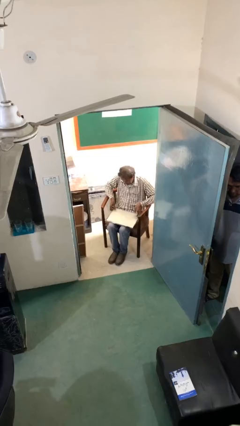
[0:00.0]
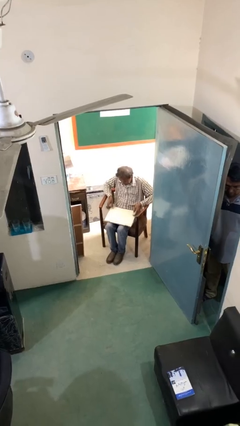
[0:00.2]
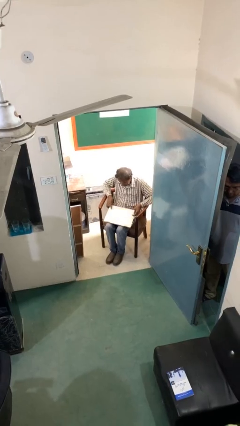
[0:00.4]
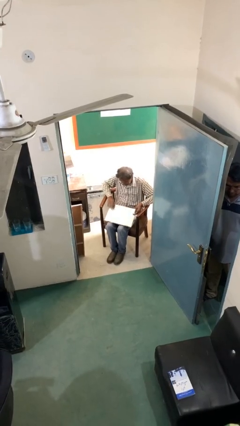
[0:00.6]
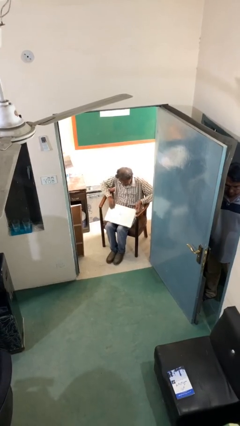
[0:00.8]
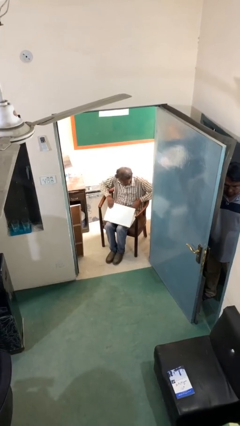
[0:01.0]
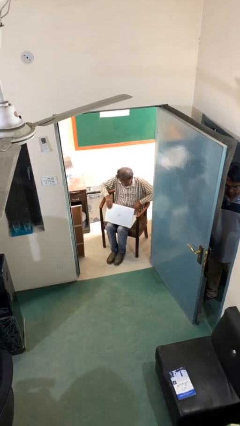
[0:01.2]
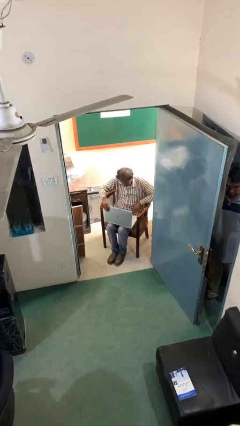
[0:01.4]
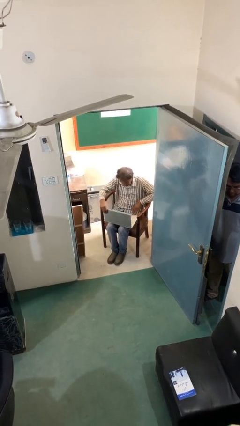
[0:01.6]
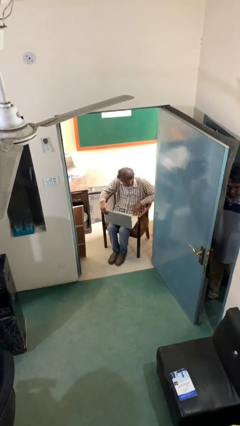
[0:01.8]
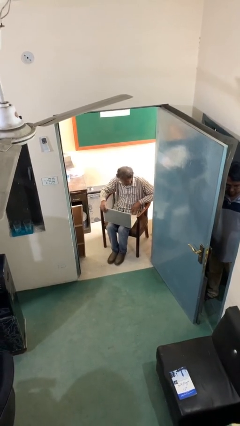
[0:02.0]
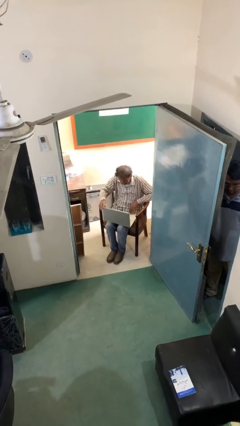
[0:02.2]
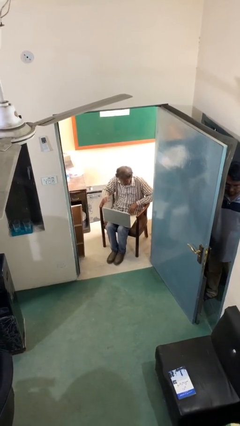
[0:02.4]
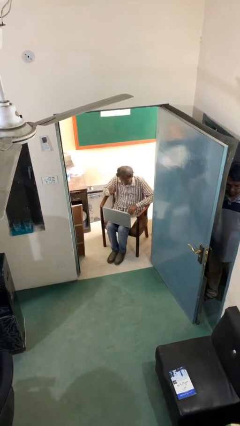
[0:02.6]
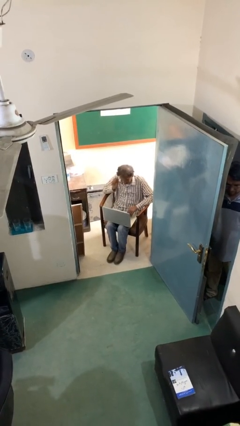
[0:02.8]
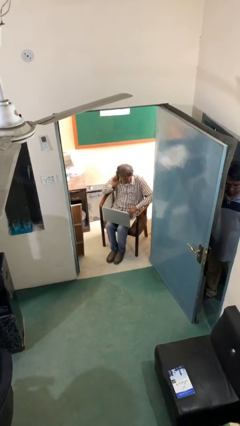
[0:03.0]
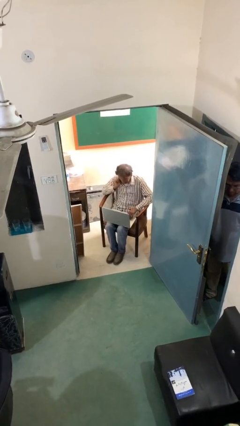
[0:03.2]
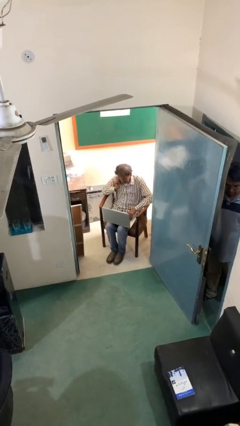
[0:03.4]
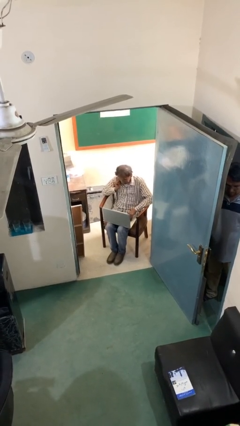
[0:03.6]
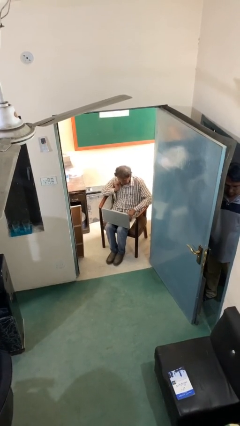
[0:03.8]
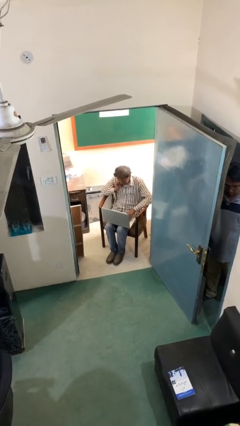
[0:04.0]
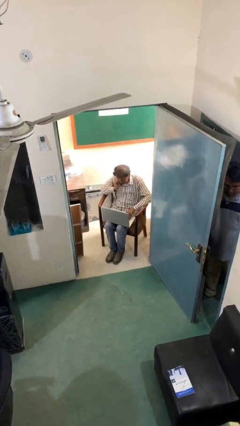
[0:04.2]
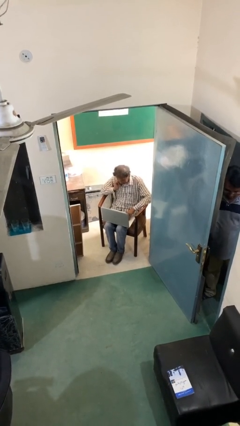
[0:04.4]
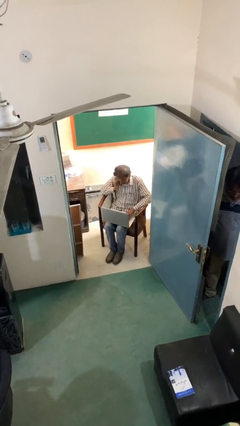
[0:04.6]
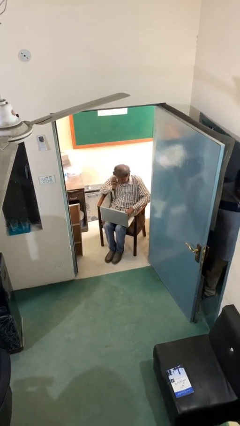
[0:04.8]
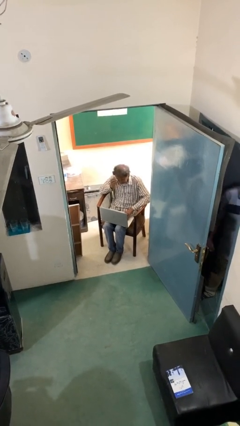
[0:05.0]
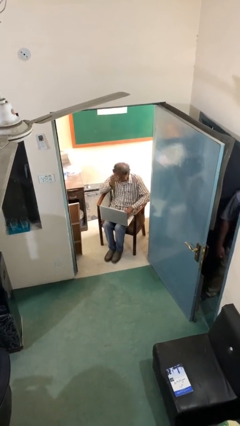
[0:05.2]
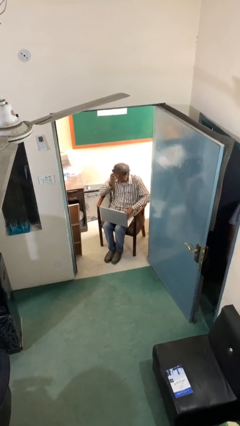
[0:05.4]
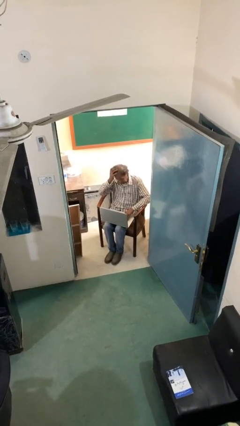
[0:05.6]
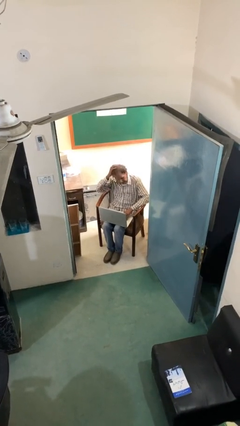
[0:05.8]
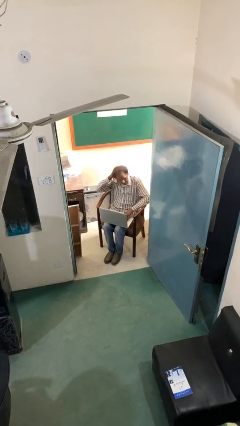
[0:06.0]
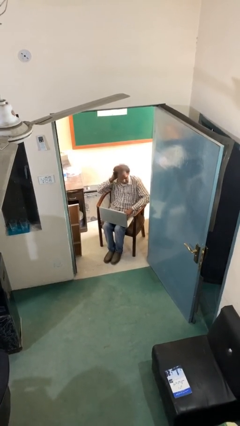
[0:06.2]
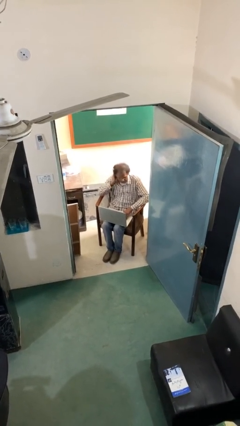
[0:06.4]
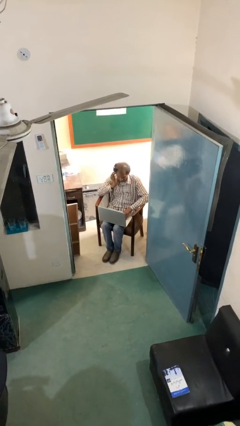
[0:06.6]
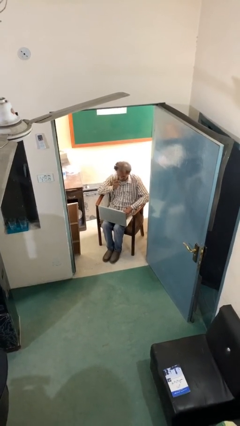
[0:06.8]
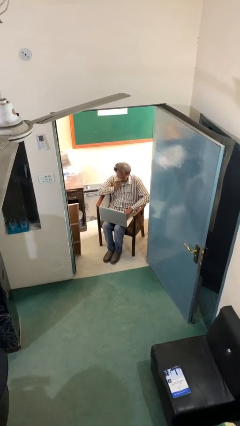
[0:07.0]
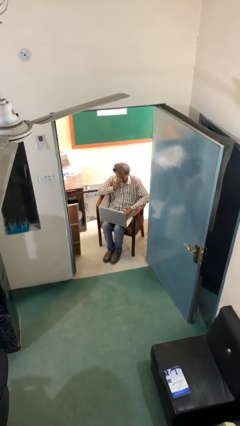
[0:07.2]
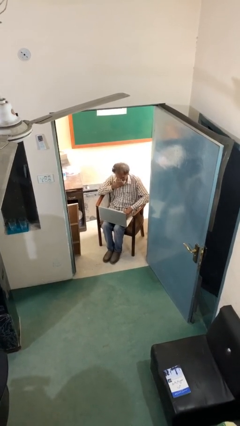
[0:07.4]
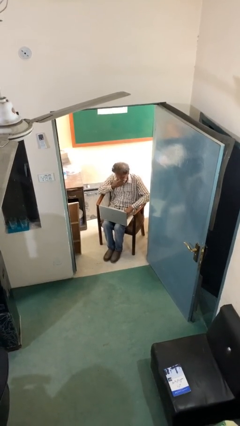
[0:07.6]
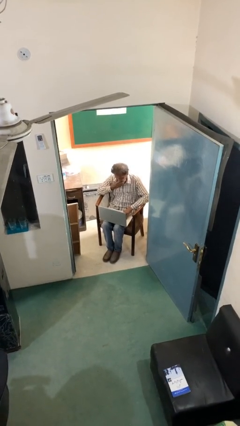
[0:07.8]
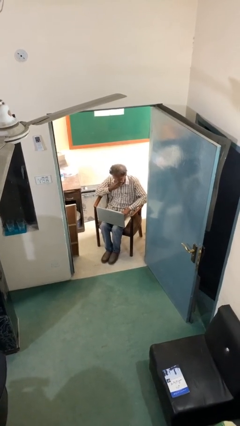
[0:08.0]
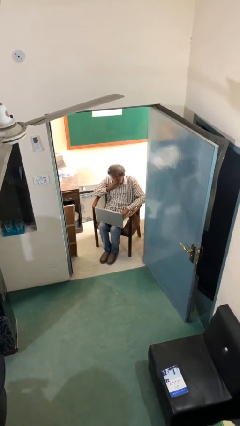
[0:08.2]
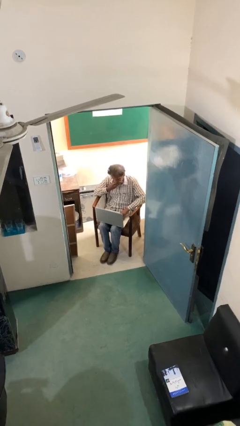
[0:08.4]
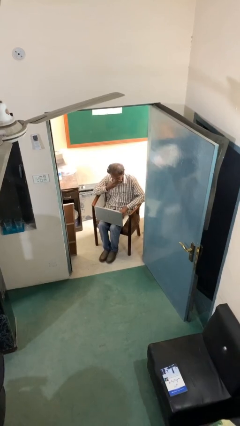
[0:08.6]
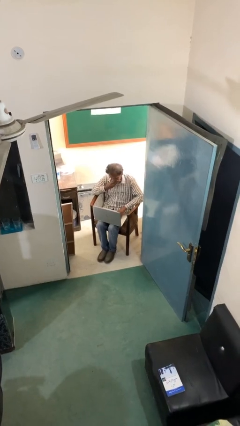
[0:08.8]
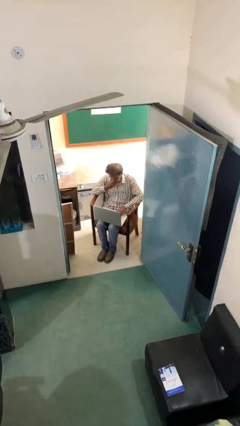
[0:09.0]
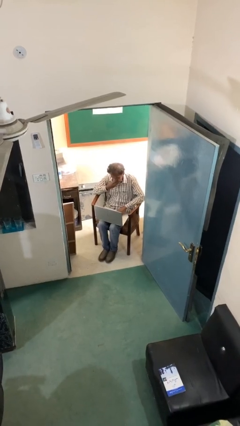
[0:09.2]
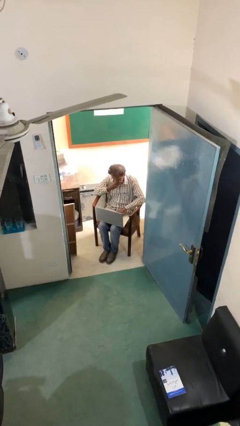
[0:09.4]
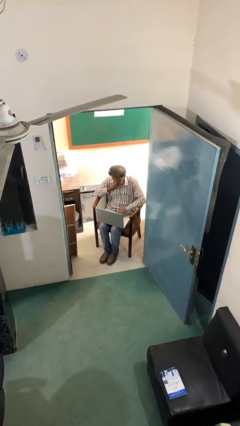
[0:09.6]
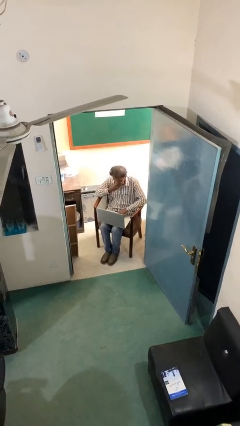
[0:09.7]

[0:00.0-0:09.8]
person interacts with laptop

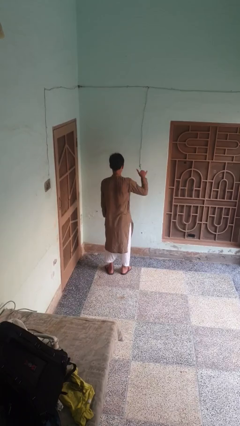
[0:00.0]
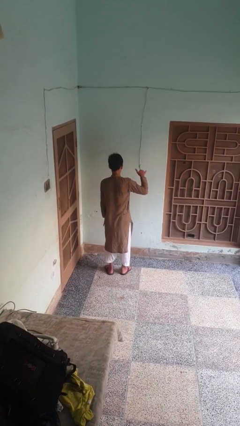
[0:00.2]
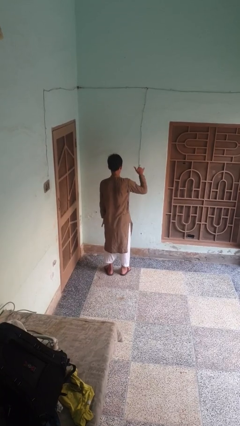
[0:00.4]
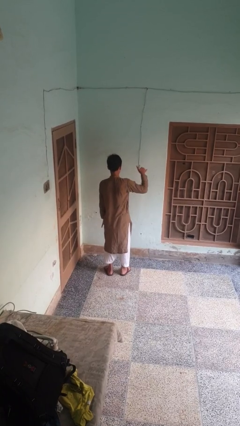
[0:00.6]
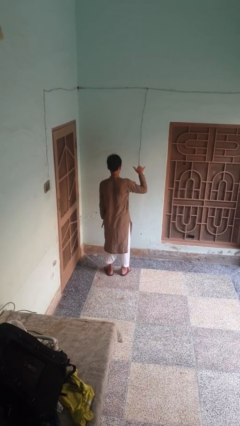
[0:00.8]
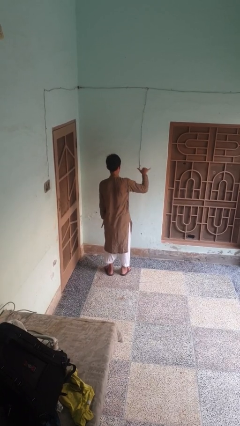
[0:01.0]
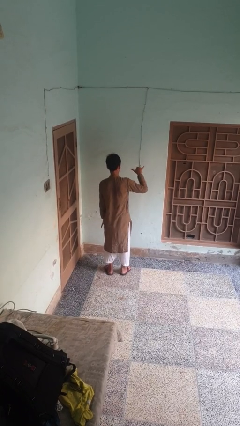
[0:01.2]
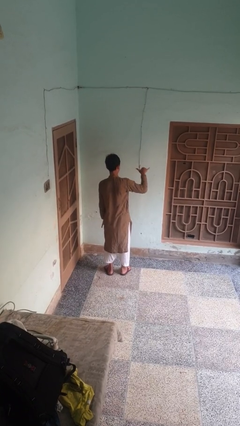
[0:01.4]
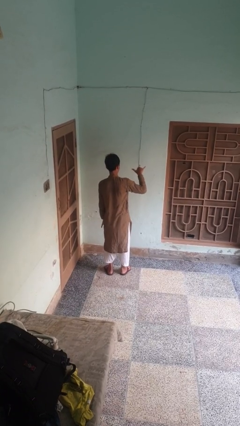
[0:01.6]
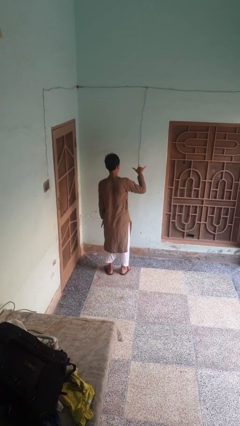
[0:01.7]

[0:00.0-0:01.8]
person gestures hang loose

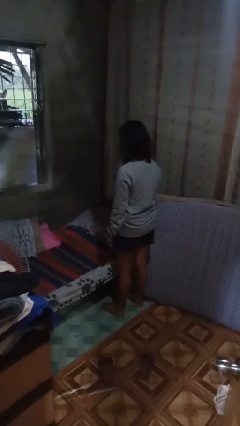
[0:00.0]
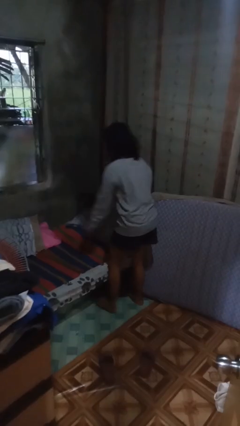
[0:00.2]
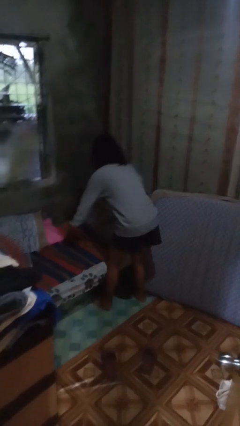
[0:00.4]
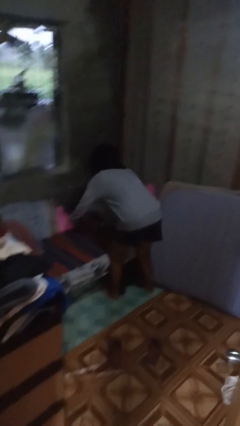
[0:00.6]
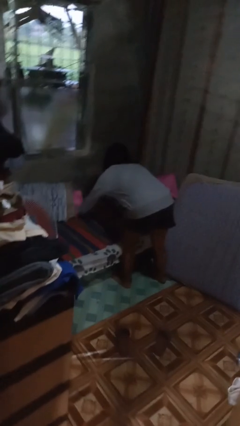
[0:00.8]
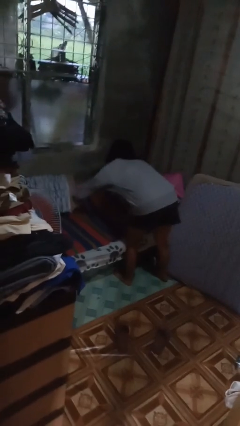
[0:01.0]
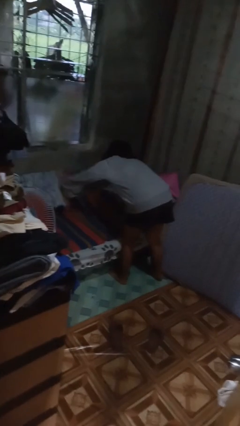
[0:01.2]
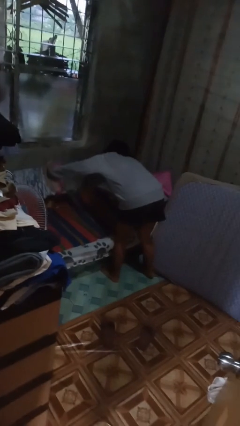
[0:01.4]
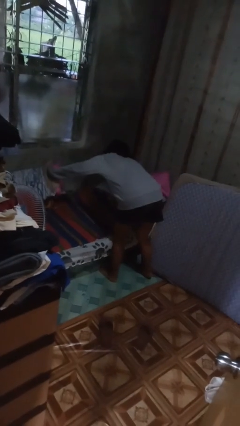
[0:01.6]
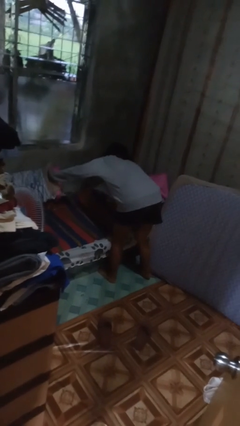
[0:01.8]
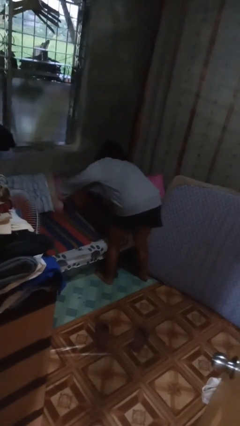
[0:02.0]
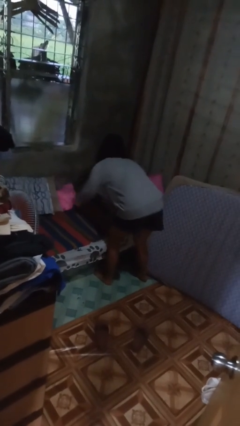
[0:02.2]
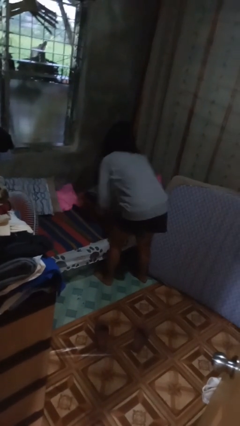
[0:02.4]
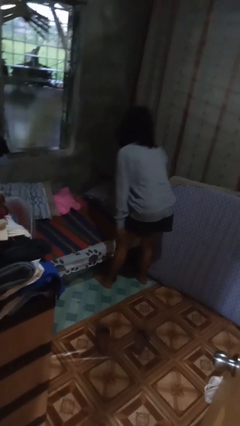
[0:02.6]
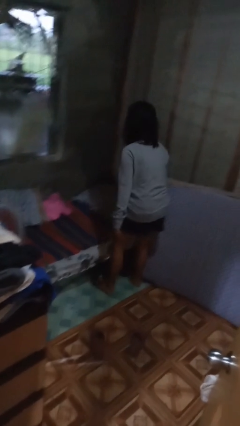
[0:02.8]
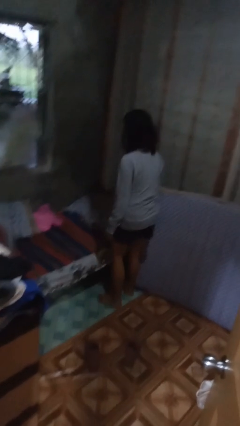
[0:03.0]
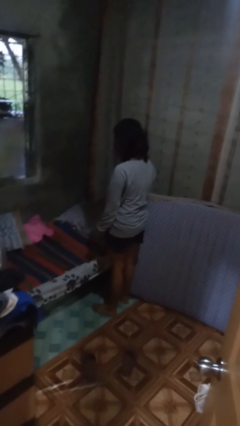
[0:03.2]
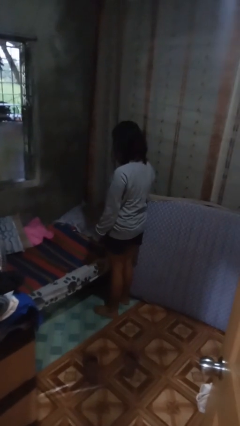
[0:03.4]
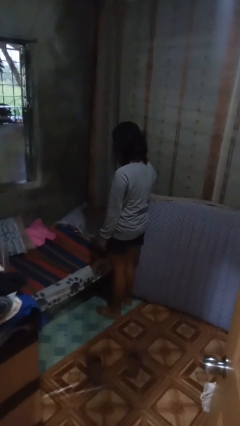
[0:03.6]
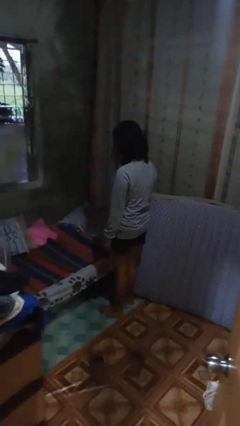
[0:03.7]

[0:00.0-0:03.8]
person searches under bed

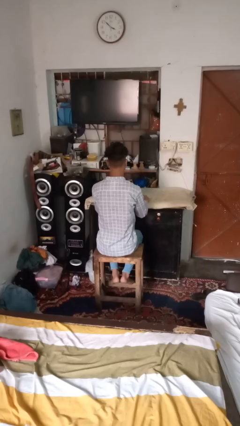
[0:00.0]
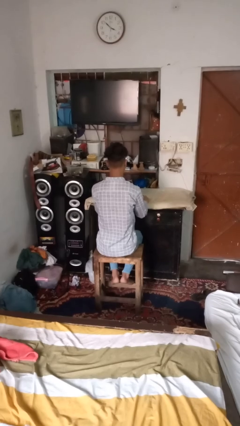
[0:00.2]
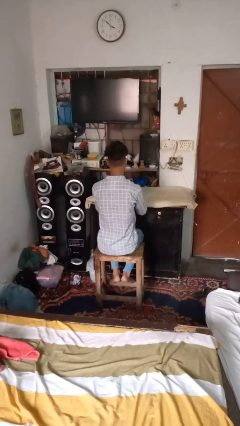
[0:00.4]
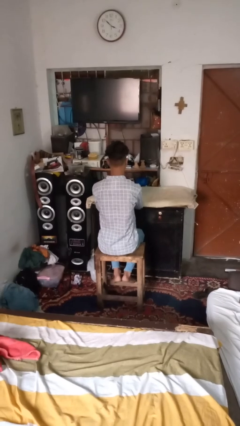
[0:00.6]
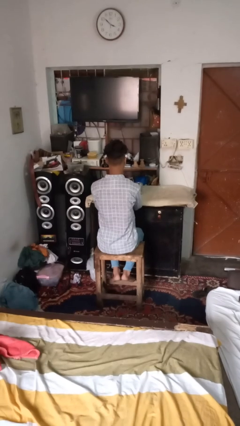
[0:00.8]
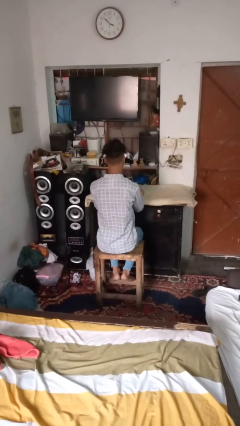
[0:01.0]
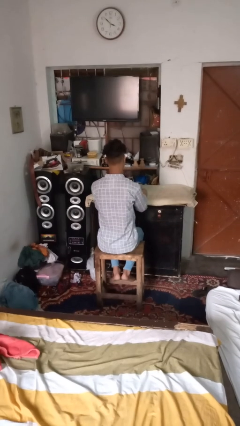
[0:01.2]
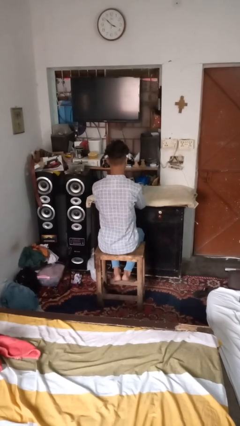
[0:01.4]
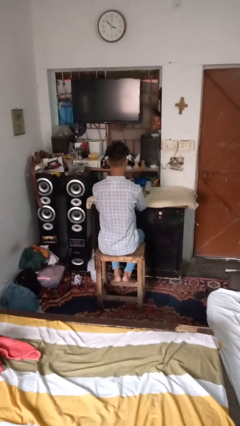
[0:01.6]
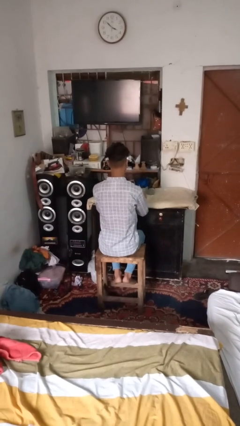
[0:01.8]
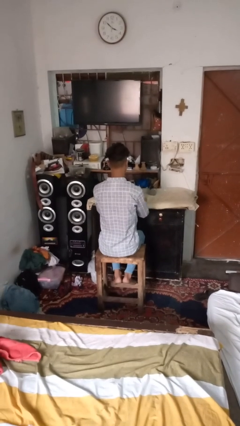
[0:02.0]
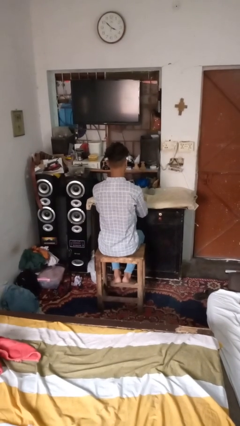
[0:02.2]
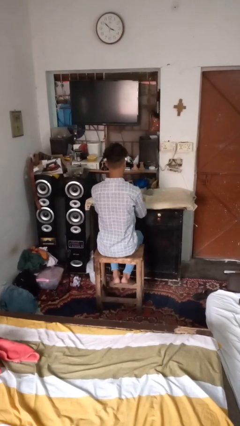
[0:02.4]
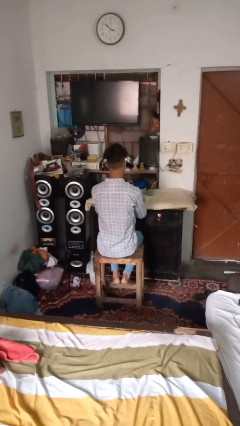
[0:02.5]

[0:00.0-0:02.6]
person knocks over glass

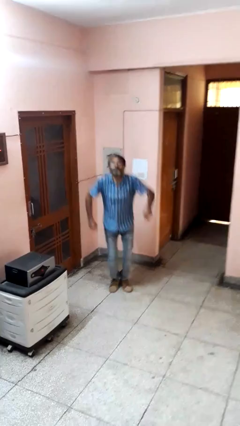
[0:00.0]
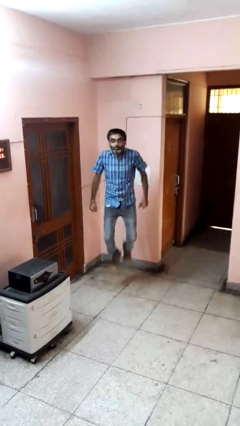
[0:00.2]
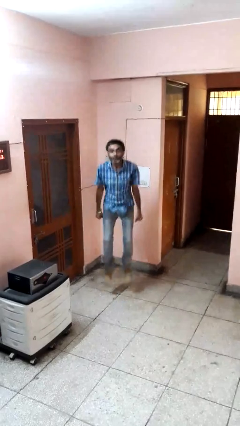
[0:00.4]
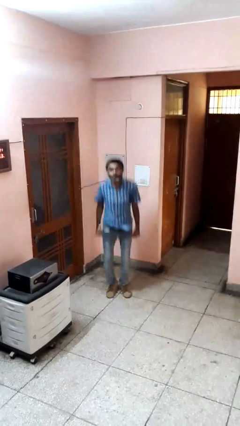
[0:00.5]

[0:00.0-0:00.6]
person jumps
